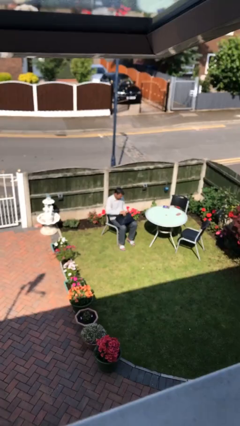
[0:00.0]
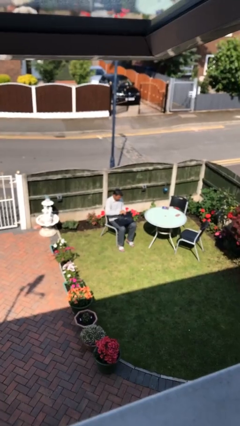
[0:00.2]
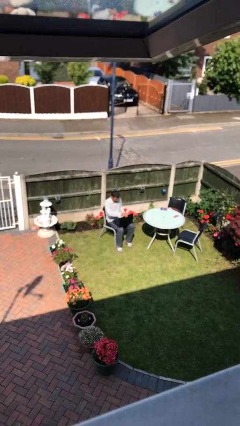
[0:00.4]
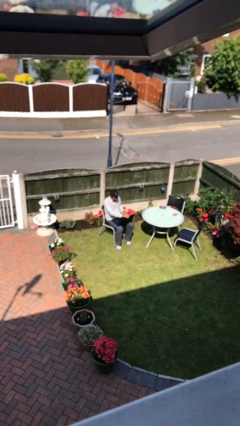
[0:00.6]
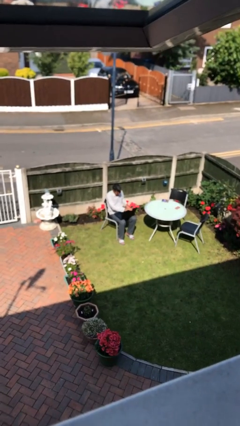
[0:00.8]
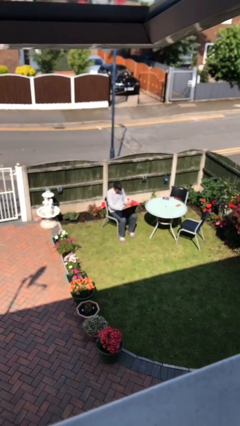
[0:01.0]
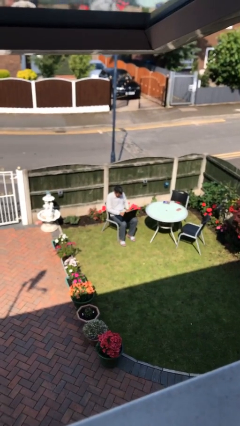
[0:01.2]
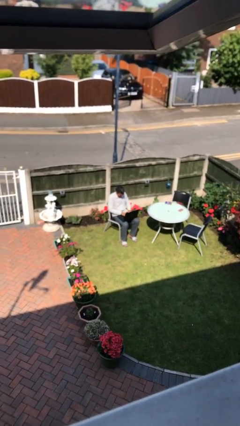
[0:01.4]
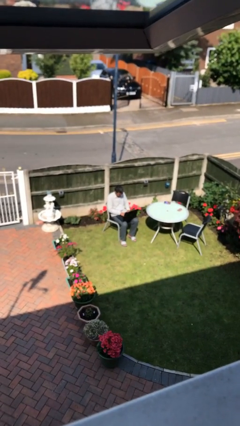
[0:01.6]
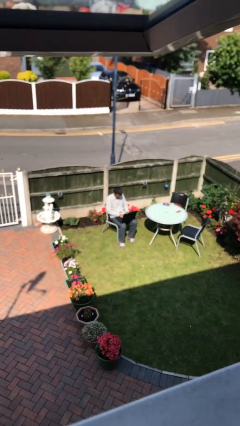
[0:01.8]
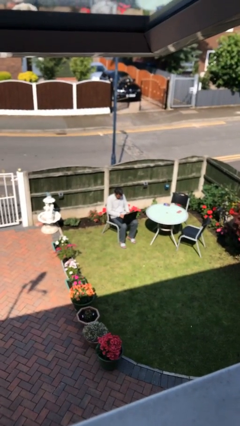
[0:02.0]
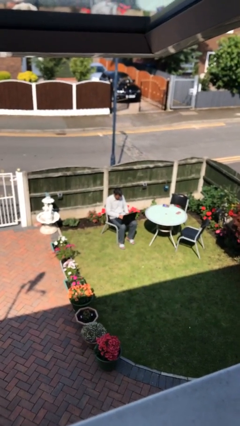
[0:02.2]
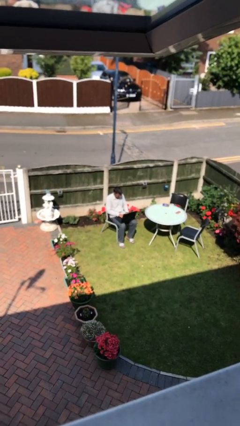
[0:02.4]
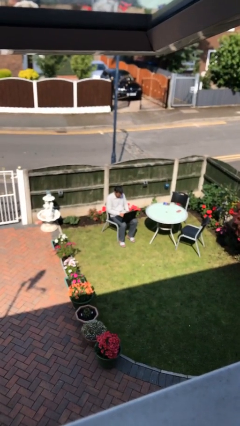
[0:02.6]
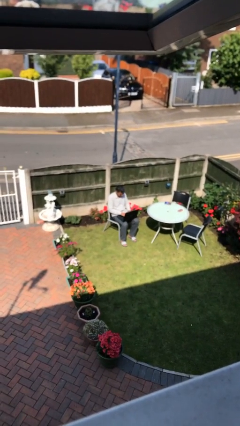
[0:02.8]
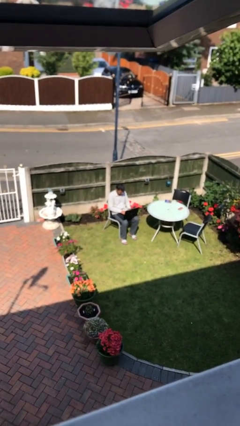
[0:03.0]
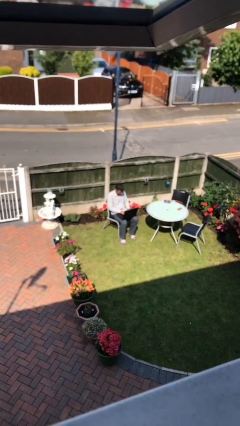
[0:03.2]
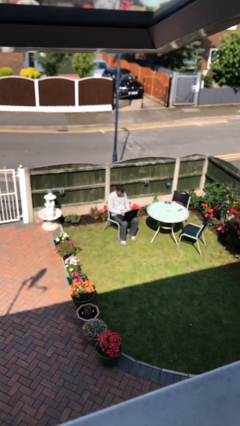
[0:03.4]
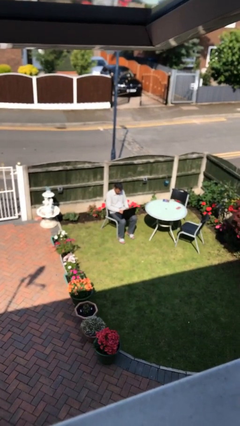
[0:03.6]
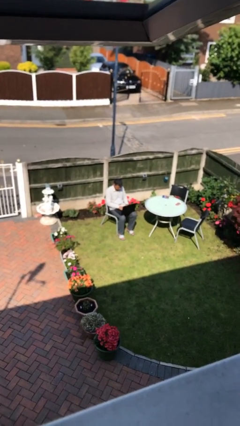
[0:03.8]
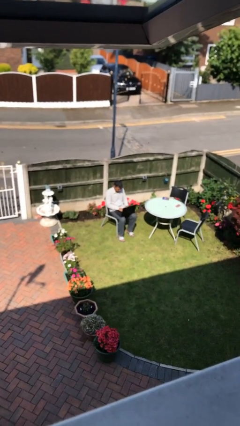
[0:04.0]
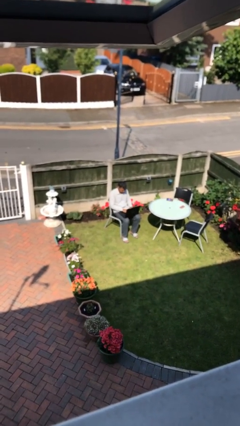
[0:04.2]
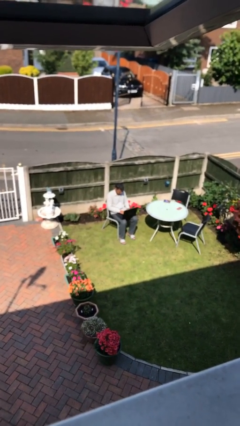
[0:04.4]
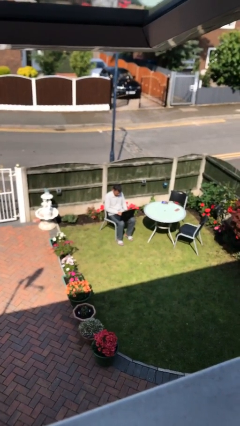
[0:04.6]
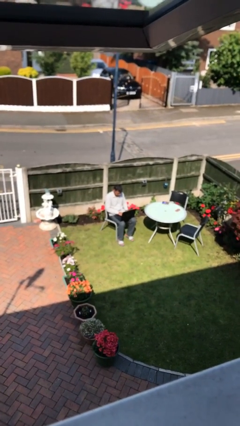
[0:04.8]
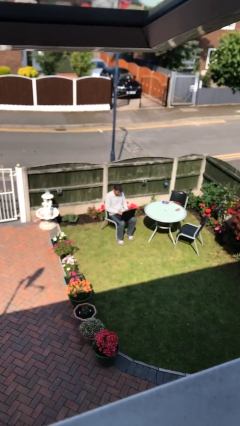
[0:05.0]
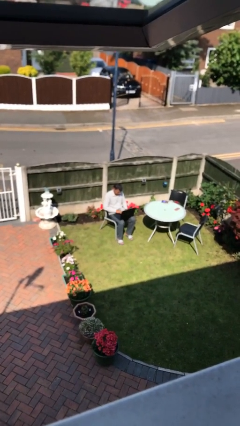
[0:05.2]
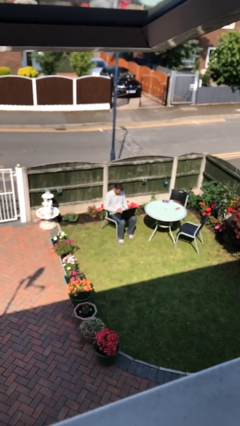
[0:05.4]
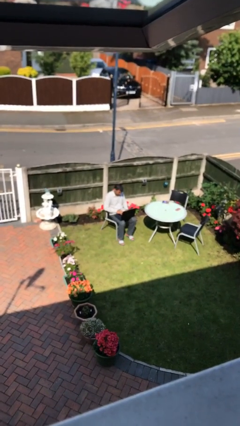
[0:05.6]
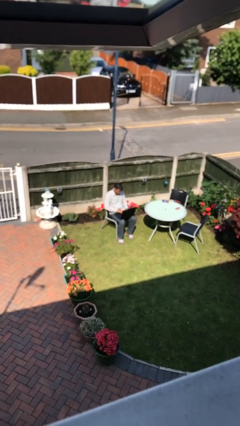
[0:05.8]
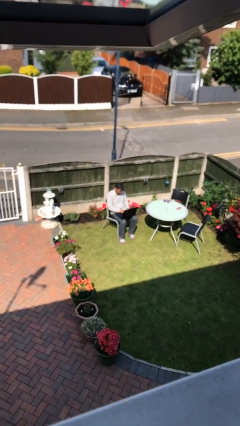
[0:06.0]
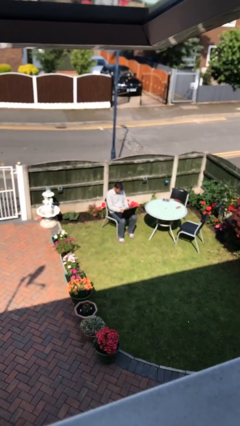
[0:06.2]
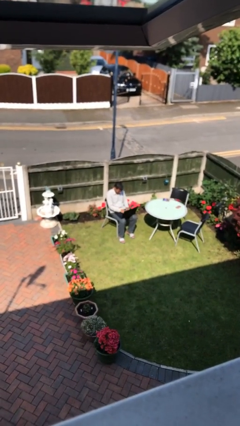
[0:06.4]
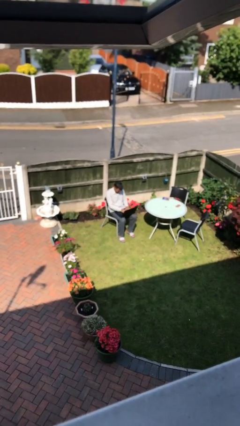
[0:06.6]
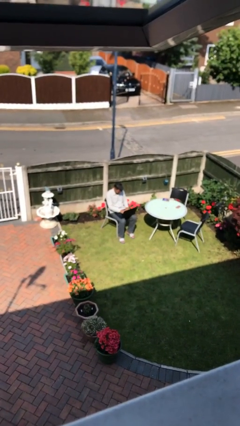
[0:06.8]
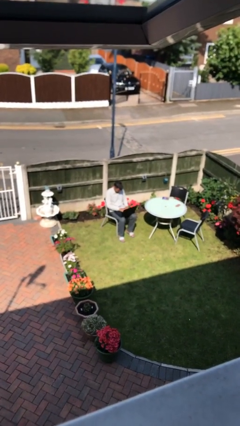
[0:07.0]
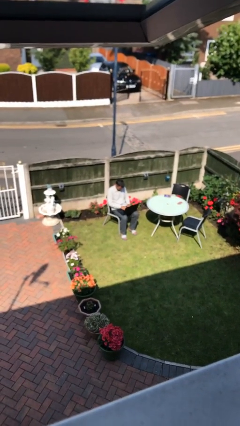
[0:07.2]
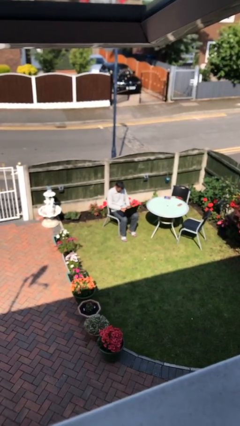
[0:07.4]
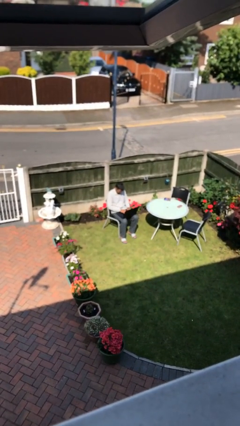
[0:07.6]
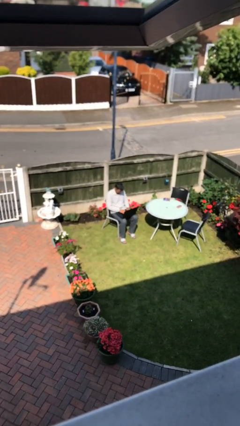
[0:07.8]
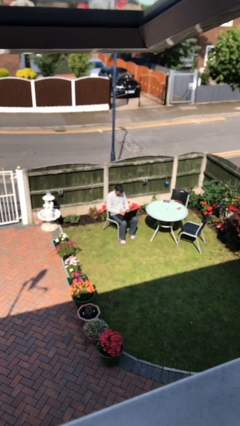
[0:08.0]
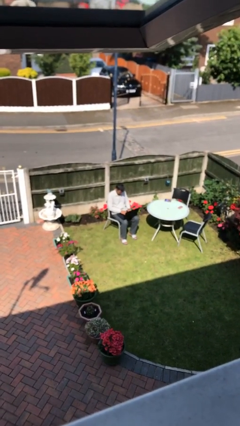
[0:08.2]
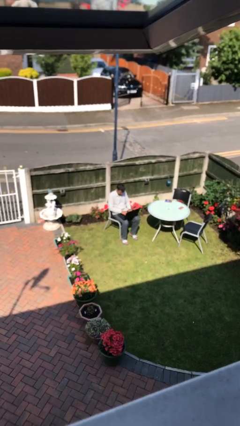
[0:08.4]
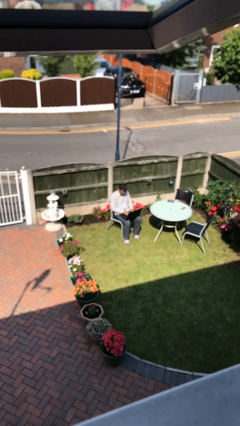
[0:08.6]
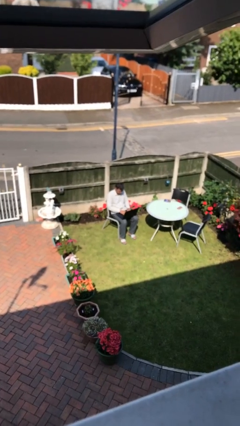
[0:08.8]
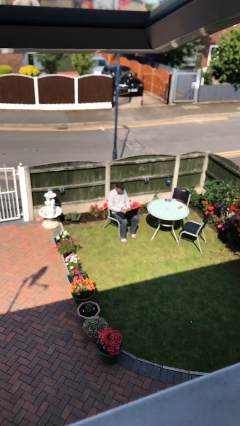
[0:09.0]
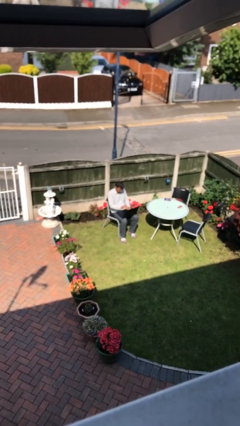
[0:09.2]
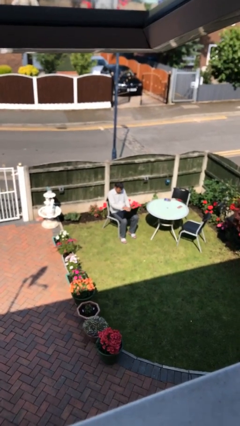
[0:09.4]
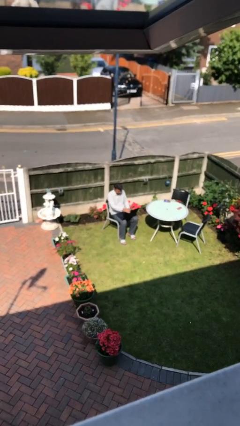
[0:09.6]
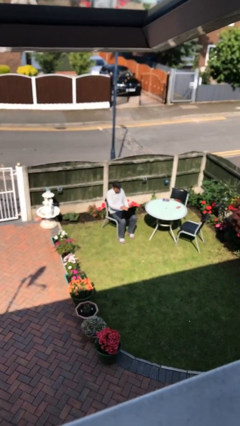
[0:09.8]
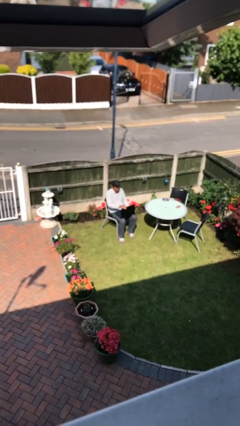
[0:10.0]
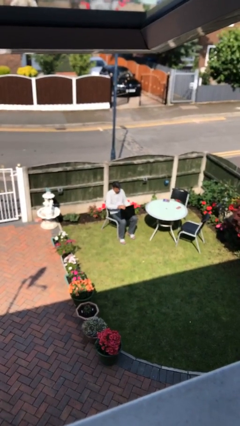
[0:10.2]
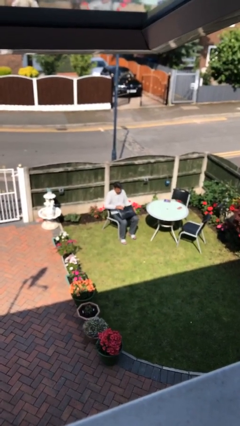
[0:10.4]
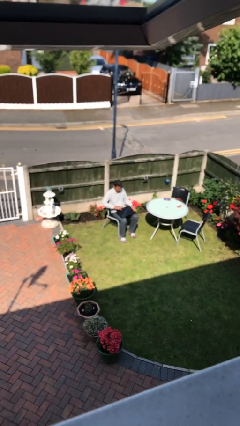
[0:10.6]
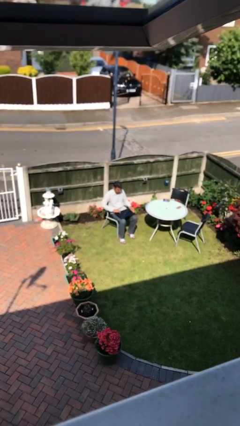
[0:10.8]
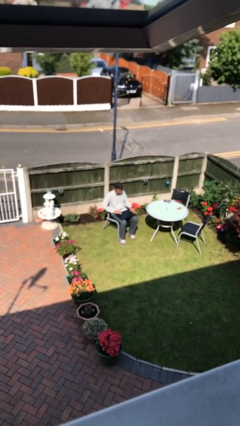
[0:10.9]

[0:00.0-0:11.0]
person interacts with laptop

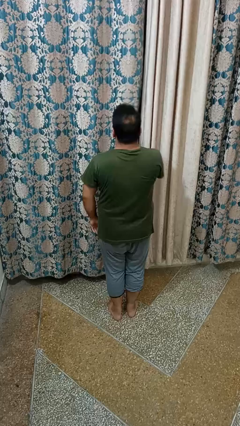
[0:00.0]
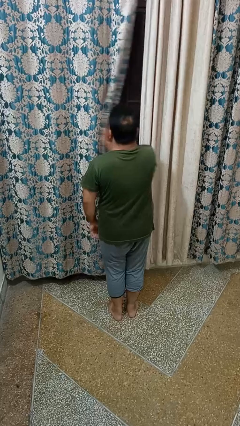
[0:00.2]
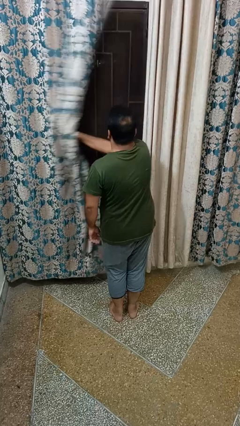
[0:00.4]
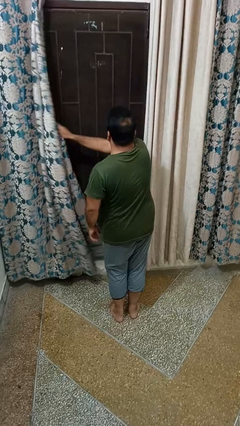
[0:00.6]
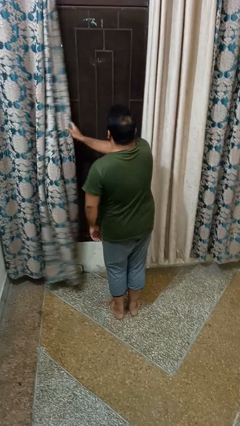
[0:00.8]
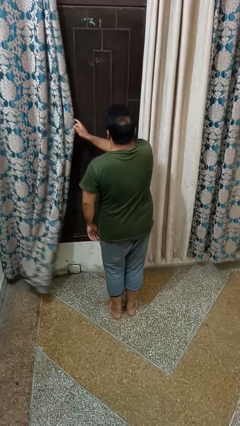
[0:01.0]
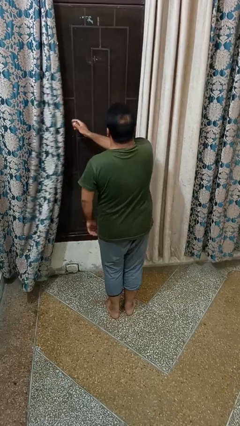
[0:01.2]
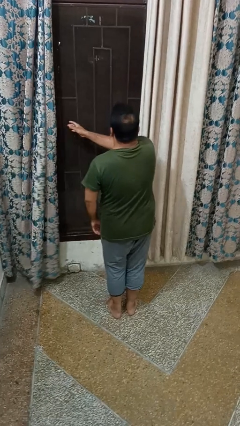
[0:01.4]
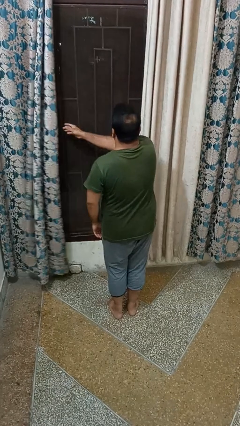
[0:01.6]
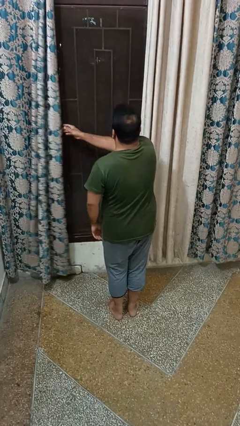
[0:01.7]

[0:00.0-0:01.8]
person opens curtains

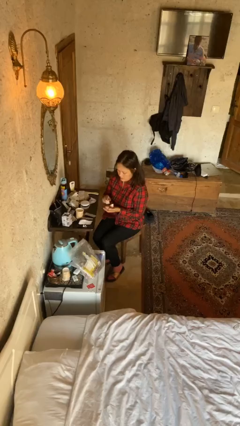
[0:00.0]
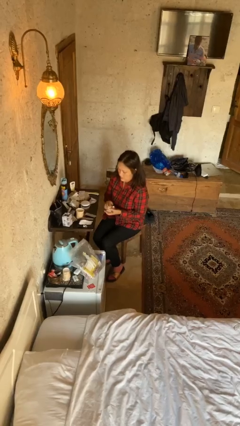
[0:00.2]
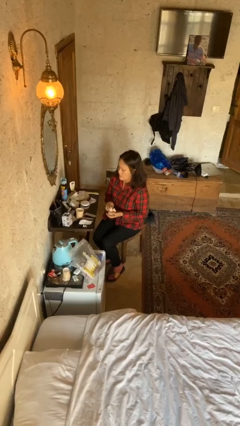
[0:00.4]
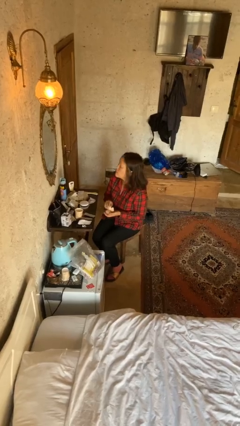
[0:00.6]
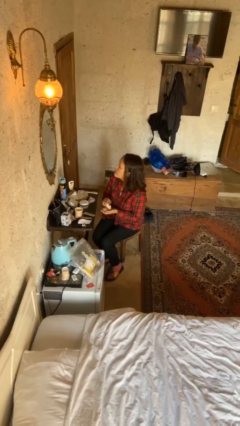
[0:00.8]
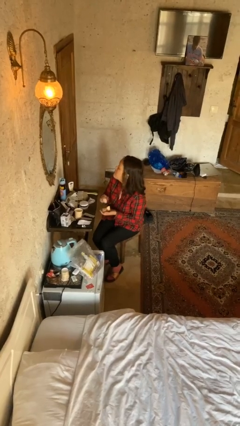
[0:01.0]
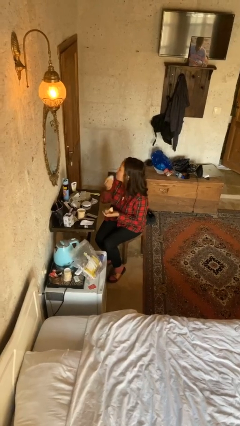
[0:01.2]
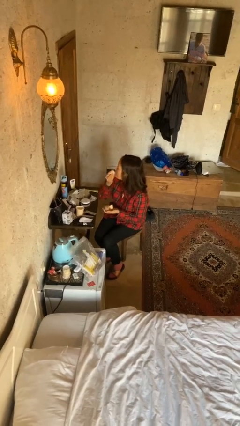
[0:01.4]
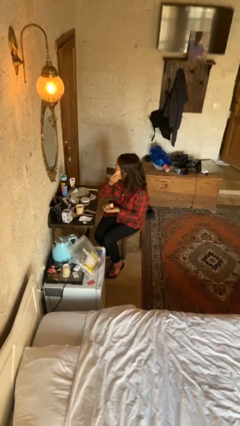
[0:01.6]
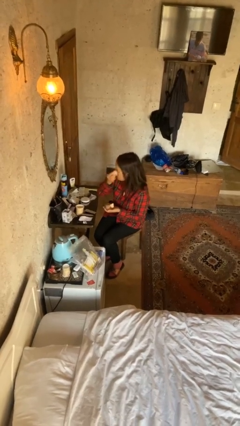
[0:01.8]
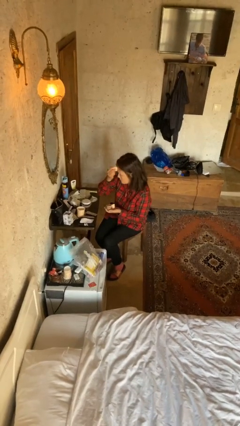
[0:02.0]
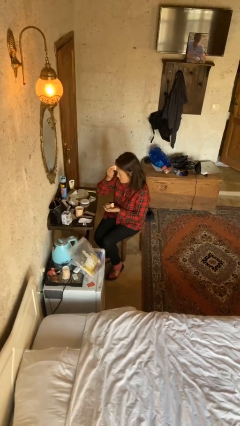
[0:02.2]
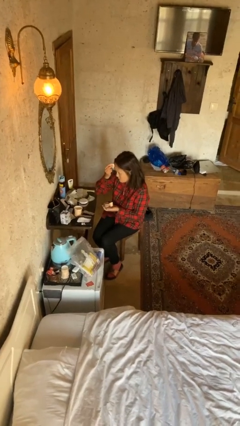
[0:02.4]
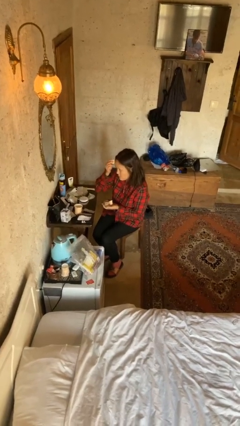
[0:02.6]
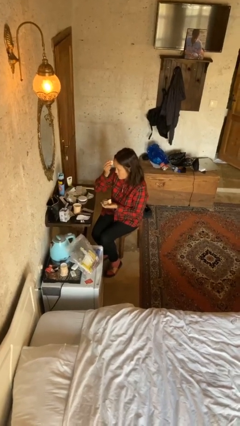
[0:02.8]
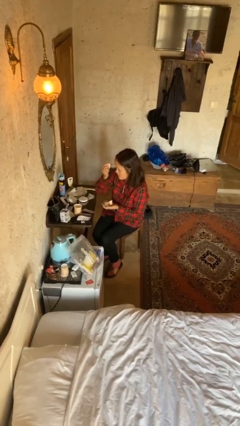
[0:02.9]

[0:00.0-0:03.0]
person applies foundation makeup

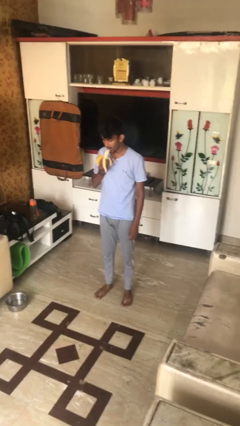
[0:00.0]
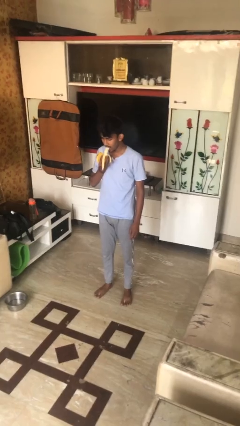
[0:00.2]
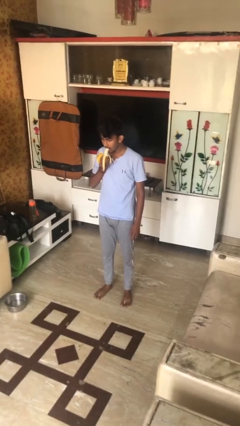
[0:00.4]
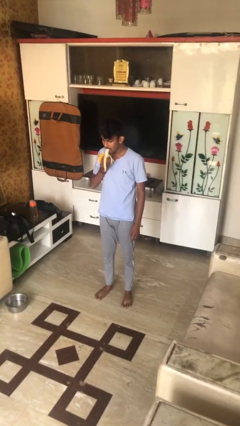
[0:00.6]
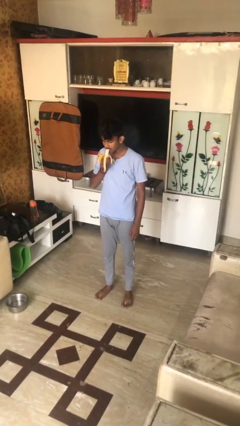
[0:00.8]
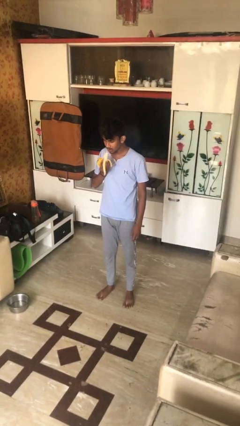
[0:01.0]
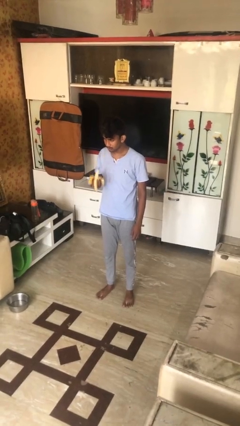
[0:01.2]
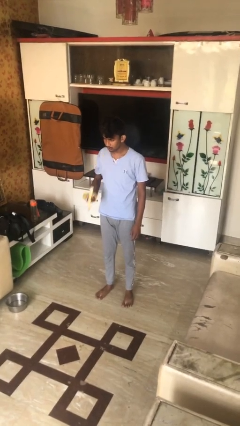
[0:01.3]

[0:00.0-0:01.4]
person eats banana

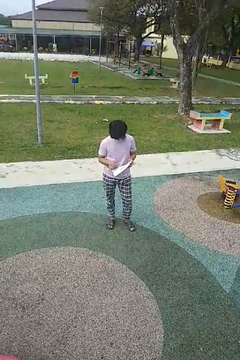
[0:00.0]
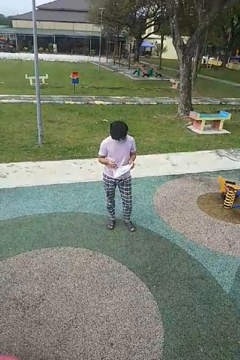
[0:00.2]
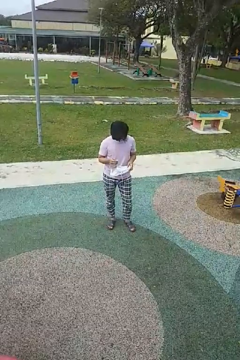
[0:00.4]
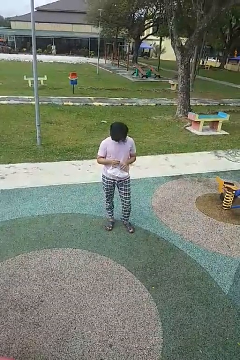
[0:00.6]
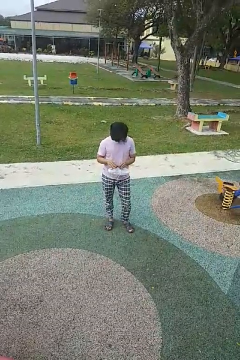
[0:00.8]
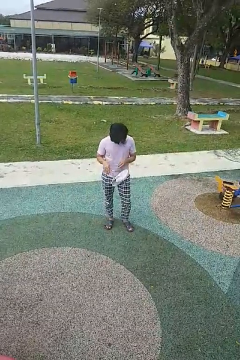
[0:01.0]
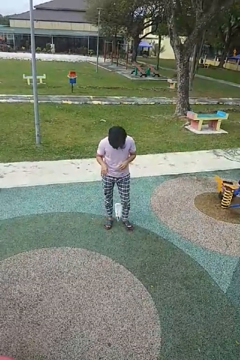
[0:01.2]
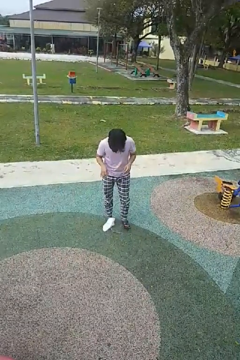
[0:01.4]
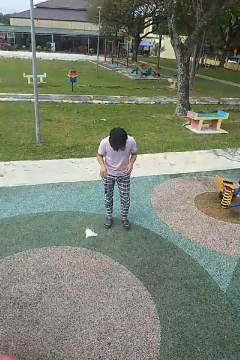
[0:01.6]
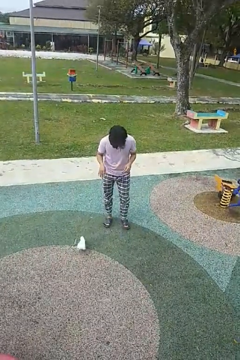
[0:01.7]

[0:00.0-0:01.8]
person drops object
